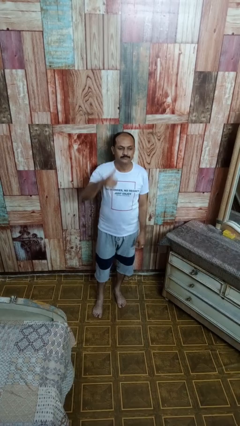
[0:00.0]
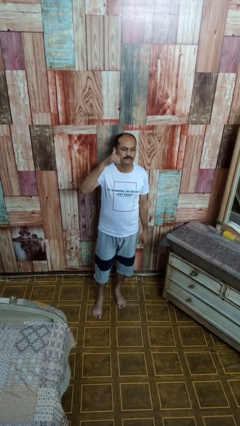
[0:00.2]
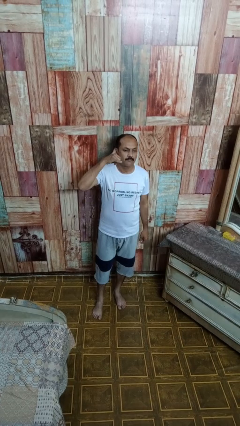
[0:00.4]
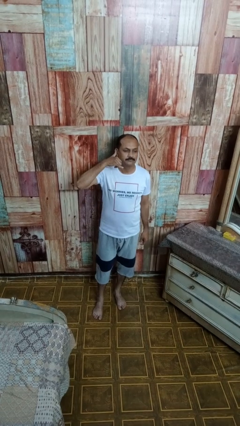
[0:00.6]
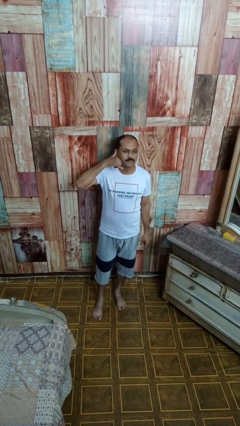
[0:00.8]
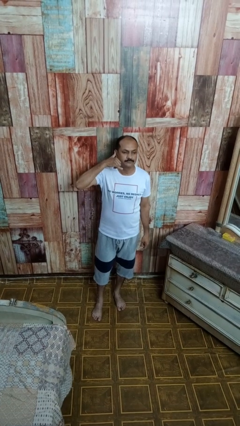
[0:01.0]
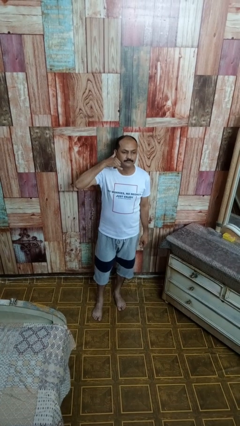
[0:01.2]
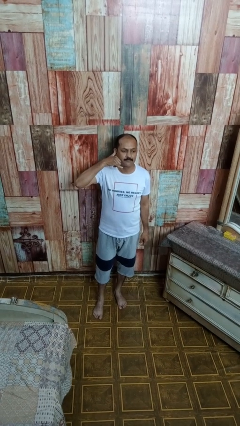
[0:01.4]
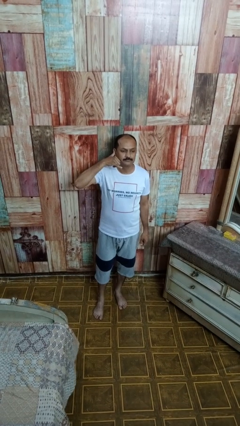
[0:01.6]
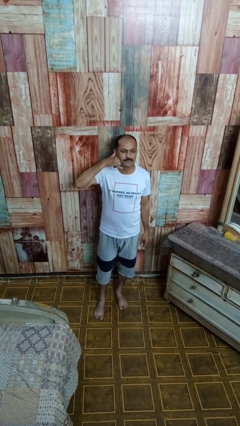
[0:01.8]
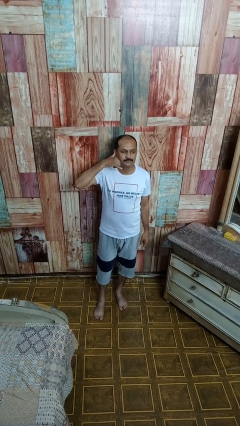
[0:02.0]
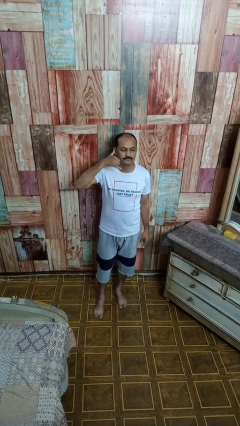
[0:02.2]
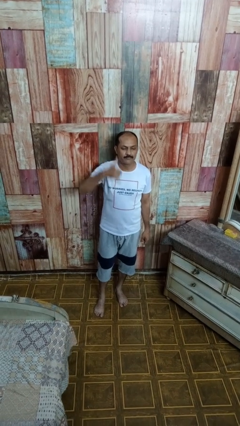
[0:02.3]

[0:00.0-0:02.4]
person gestures call me

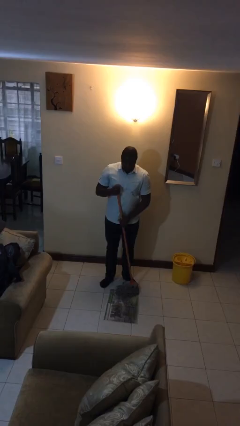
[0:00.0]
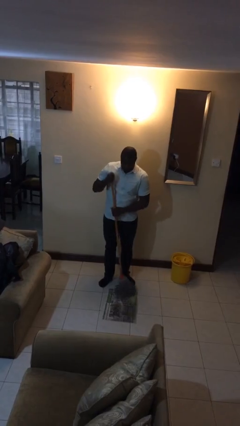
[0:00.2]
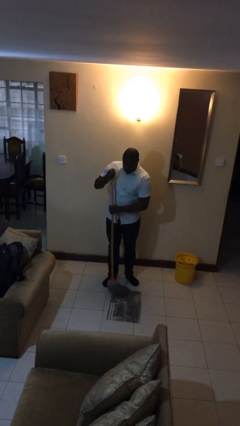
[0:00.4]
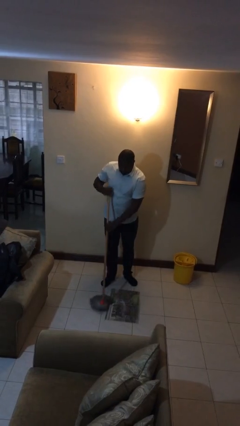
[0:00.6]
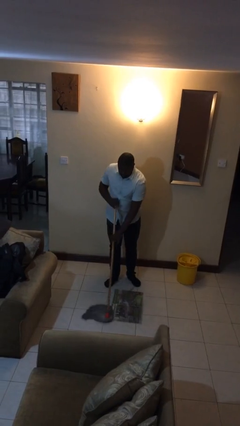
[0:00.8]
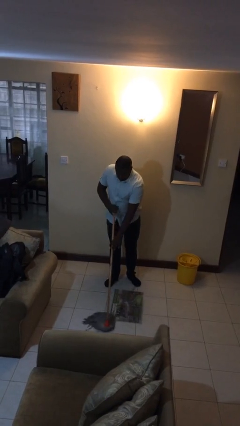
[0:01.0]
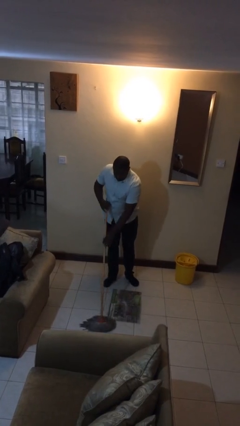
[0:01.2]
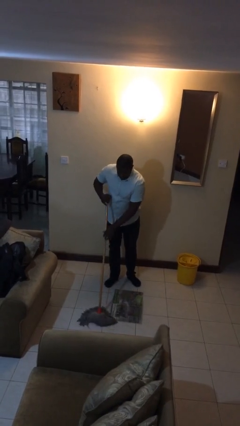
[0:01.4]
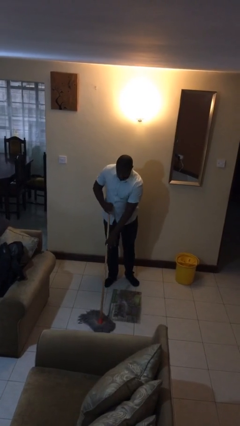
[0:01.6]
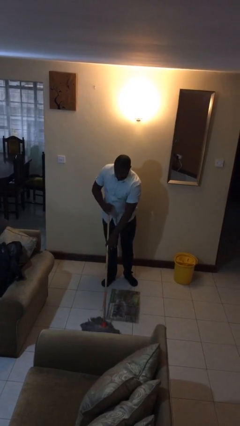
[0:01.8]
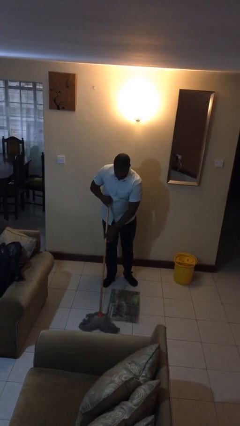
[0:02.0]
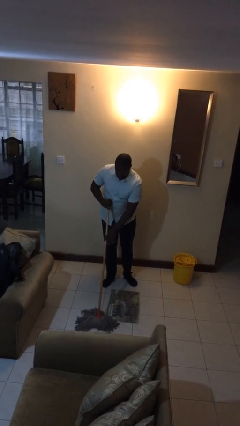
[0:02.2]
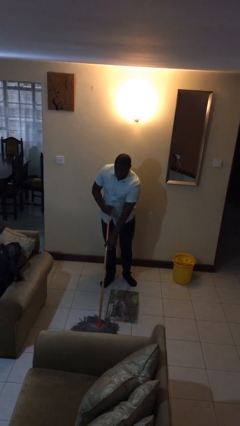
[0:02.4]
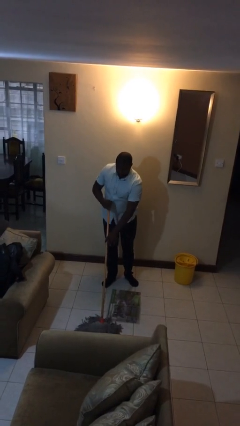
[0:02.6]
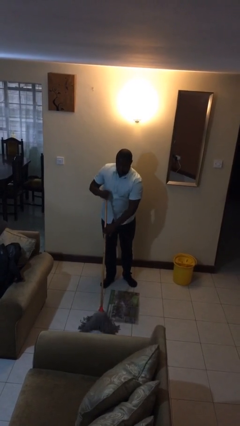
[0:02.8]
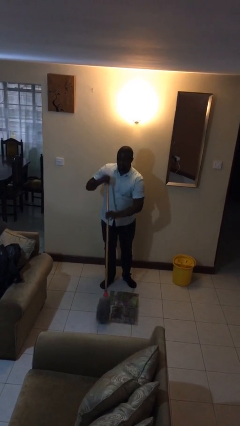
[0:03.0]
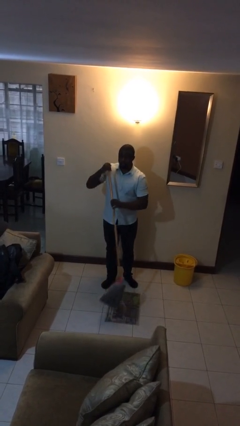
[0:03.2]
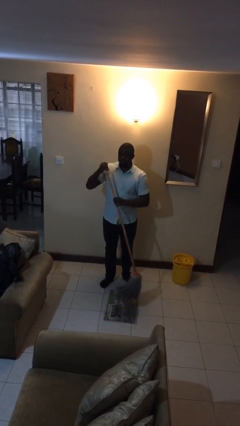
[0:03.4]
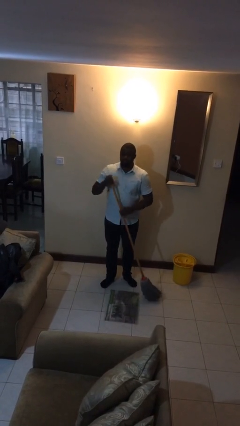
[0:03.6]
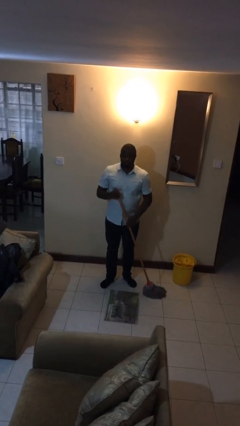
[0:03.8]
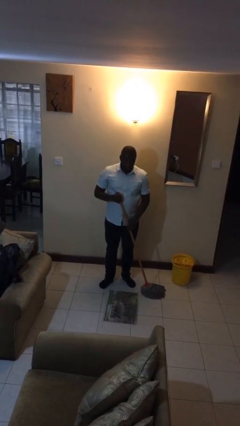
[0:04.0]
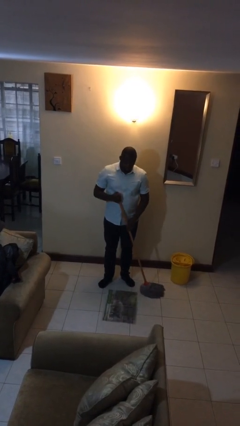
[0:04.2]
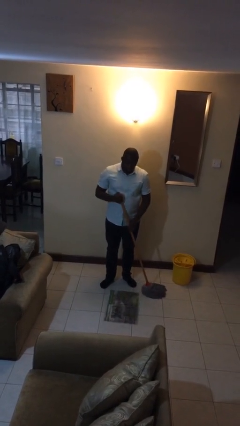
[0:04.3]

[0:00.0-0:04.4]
person mops

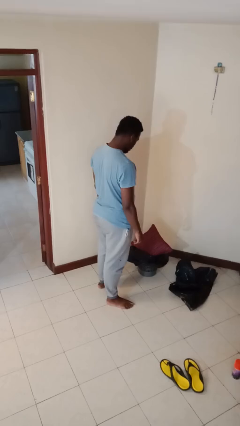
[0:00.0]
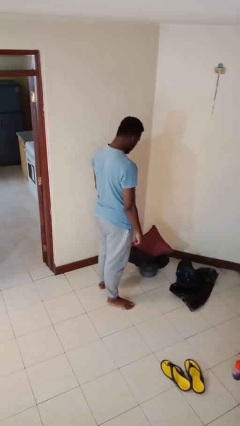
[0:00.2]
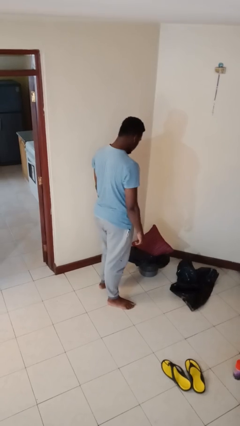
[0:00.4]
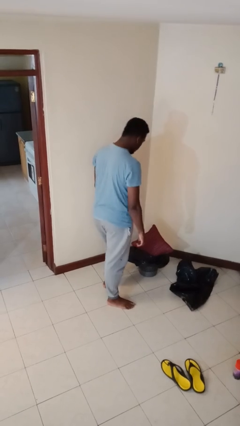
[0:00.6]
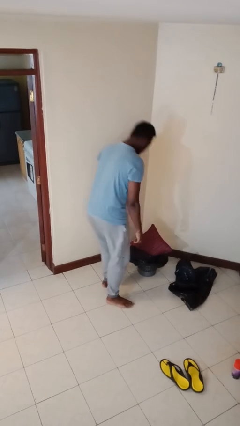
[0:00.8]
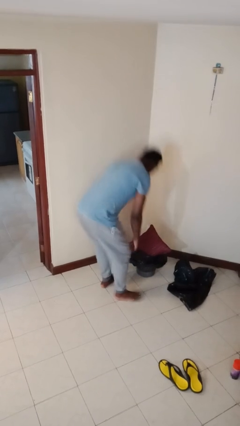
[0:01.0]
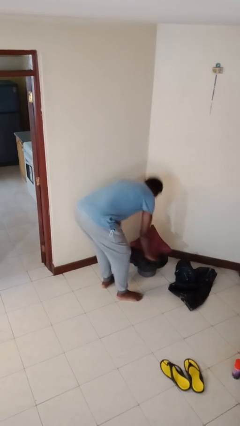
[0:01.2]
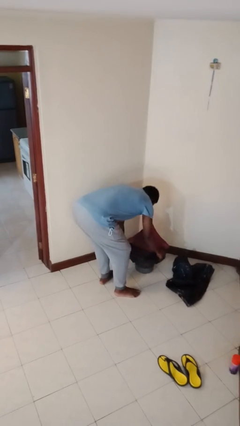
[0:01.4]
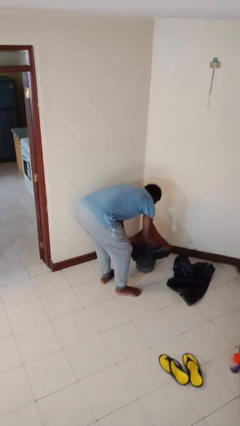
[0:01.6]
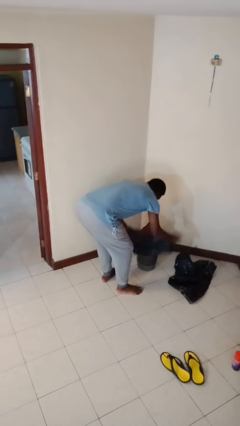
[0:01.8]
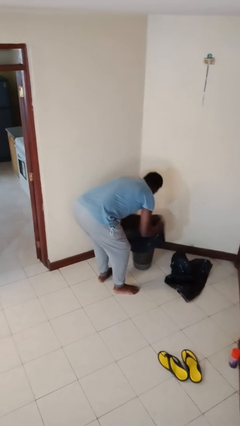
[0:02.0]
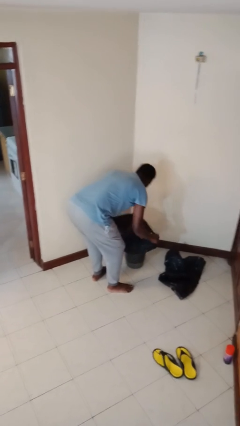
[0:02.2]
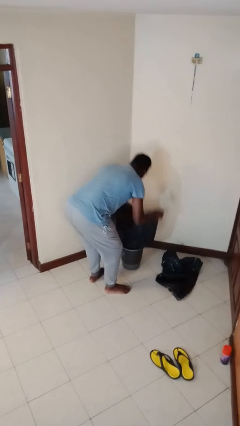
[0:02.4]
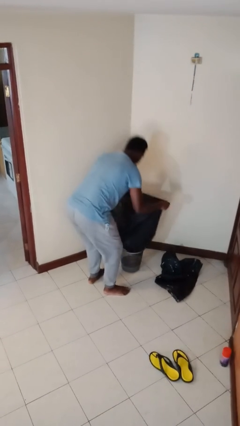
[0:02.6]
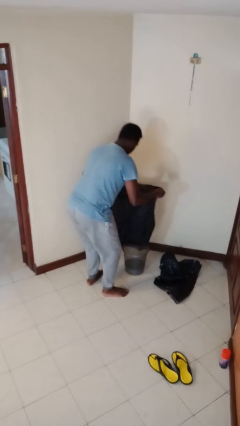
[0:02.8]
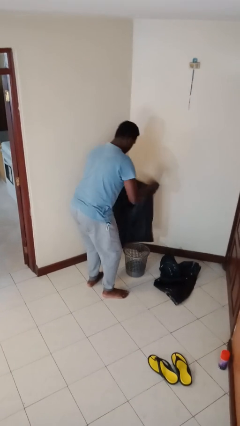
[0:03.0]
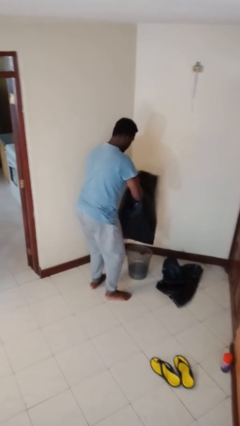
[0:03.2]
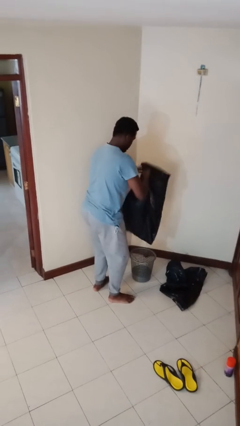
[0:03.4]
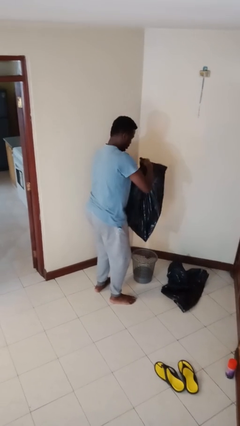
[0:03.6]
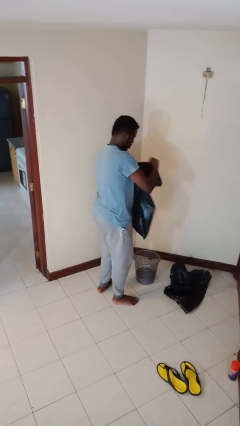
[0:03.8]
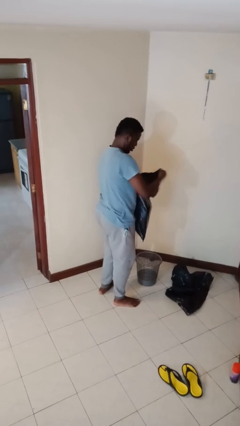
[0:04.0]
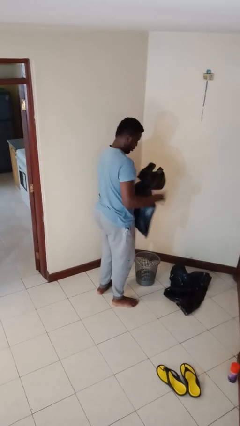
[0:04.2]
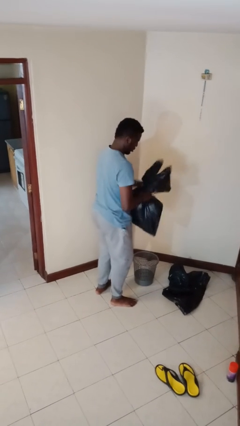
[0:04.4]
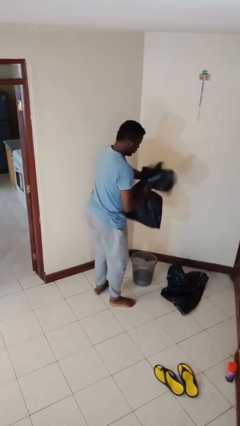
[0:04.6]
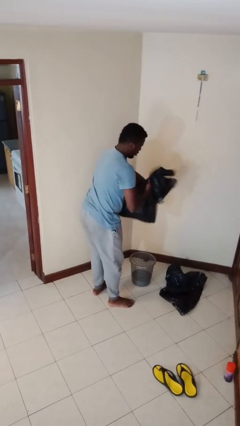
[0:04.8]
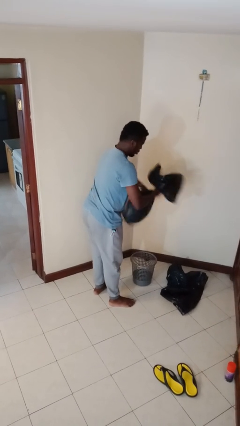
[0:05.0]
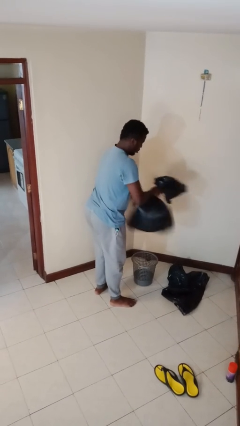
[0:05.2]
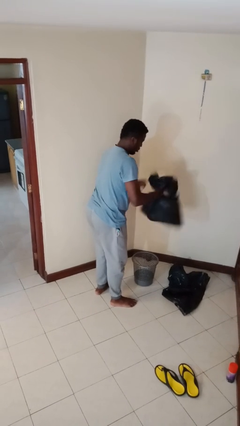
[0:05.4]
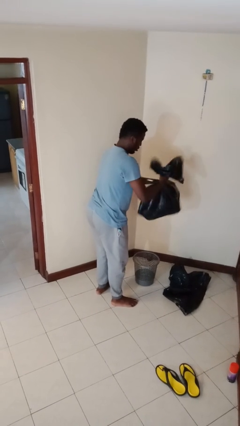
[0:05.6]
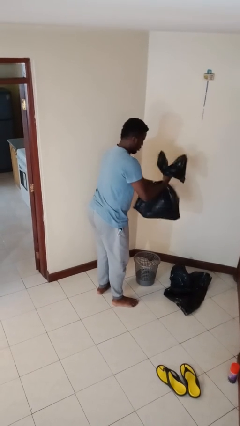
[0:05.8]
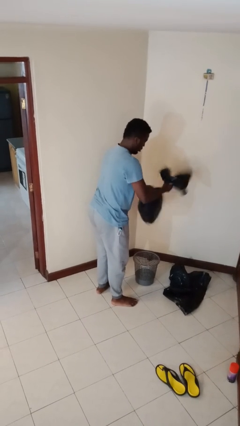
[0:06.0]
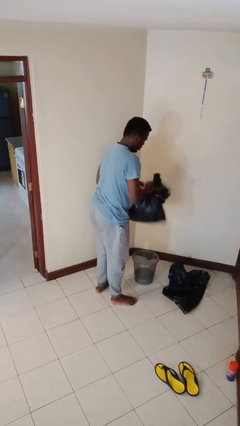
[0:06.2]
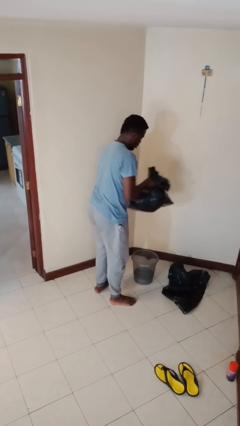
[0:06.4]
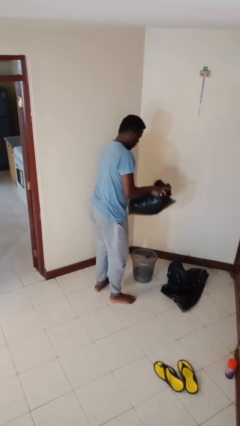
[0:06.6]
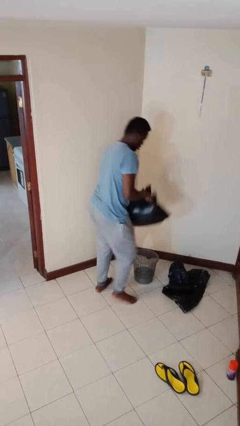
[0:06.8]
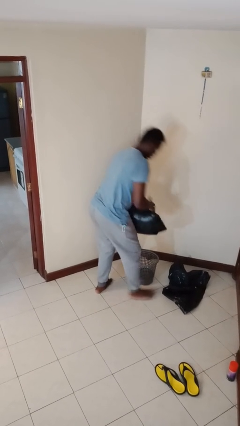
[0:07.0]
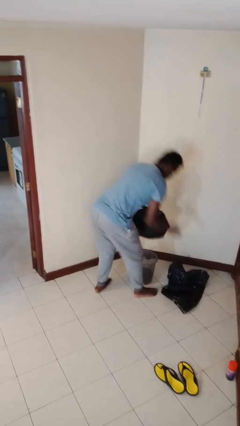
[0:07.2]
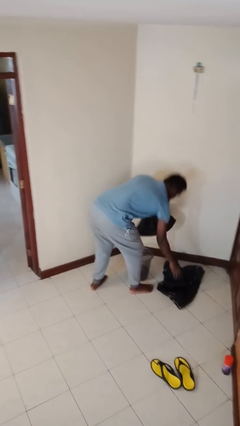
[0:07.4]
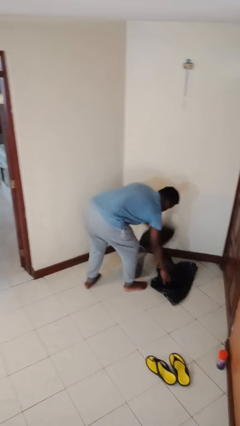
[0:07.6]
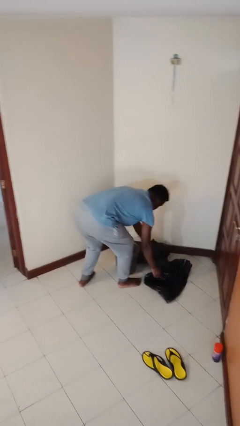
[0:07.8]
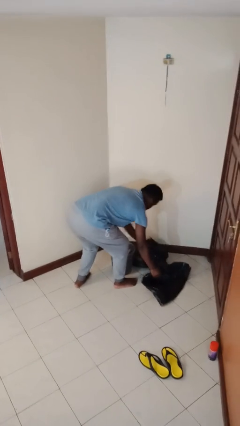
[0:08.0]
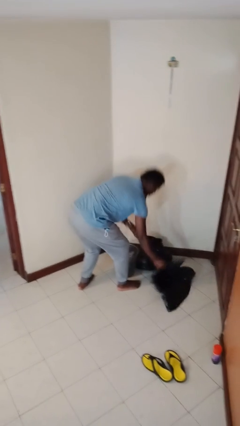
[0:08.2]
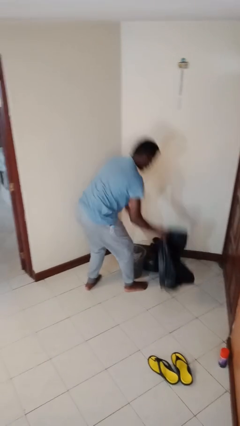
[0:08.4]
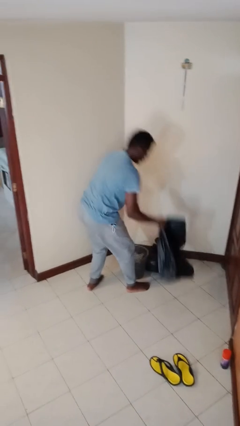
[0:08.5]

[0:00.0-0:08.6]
person removes trashbag from trashcan

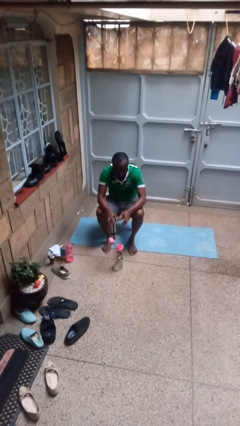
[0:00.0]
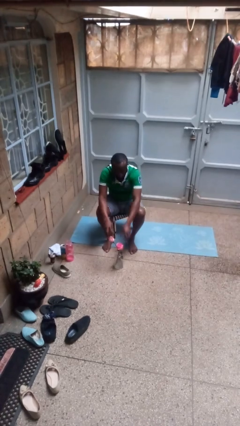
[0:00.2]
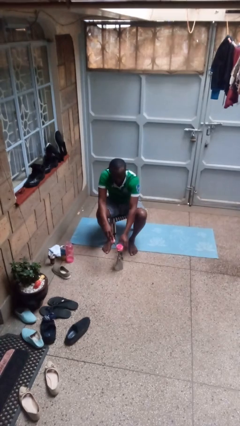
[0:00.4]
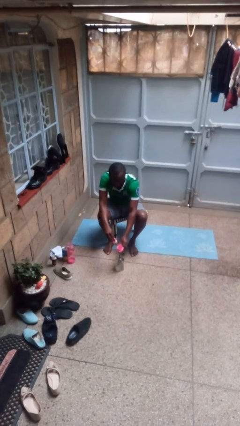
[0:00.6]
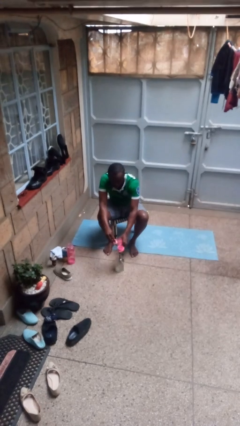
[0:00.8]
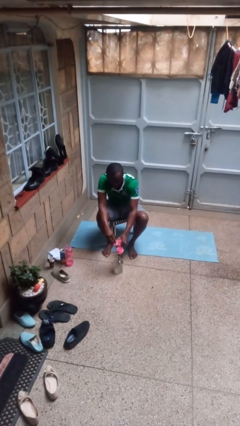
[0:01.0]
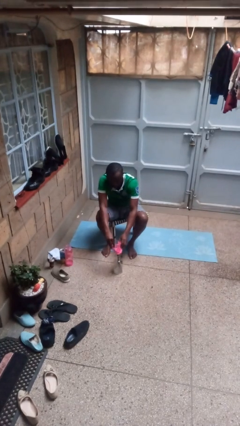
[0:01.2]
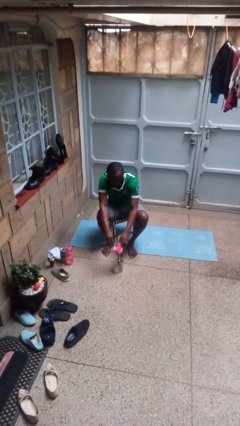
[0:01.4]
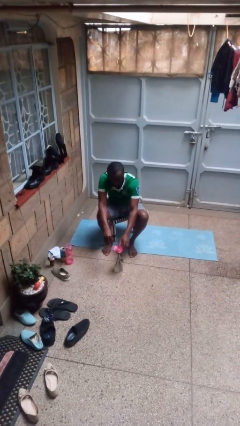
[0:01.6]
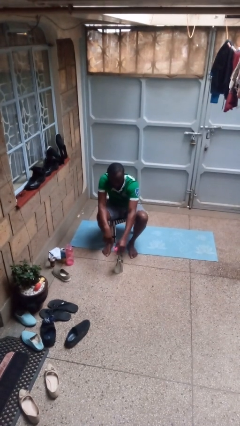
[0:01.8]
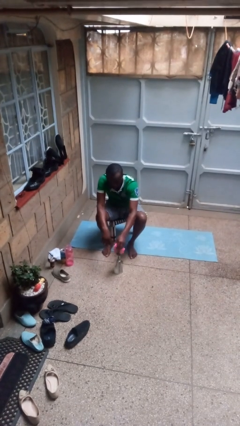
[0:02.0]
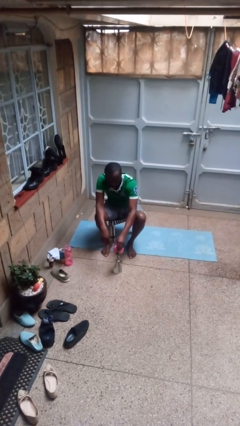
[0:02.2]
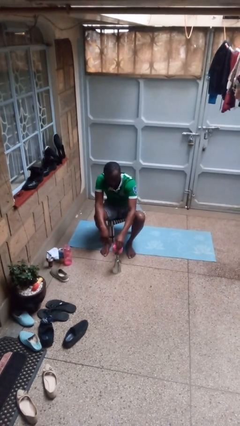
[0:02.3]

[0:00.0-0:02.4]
person arranges flowers in vase
